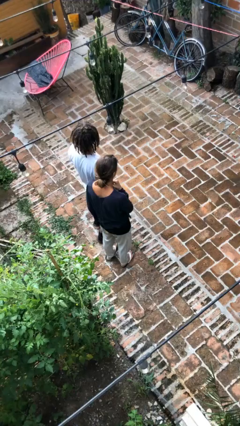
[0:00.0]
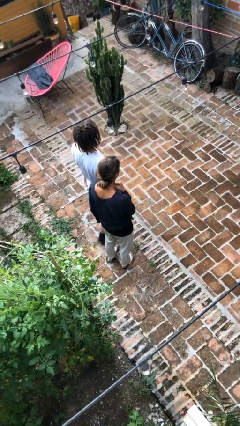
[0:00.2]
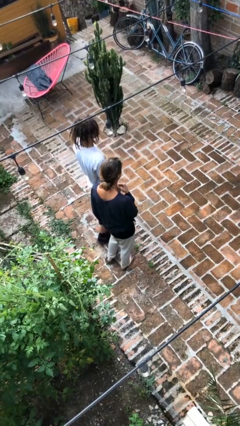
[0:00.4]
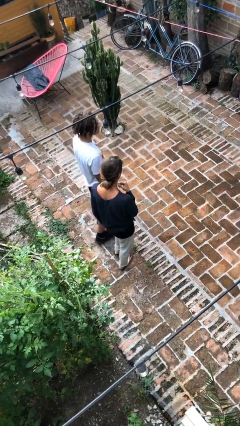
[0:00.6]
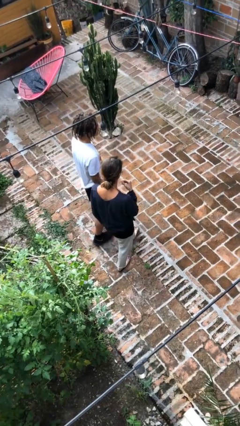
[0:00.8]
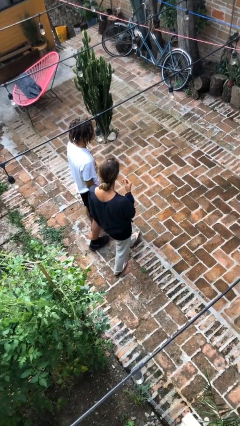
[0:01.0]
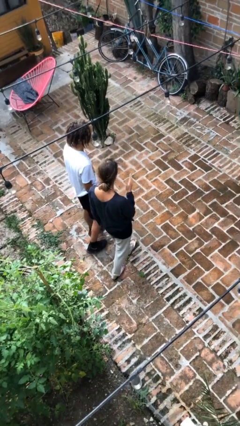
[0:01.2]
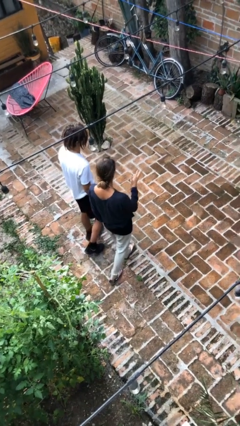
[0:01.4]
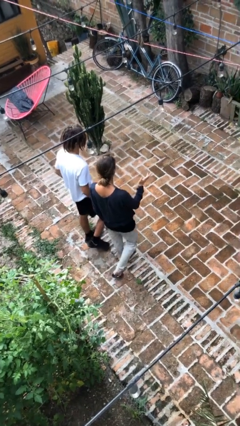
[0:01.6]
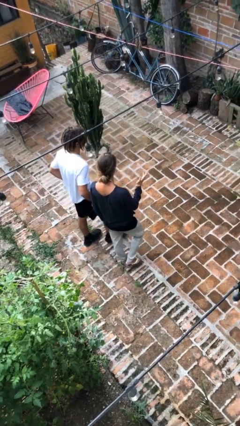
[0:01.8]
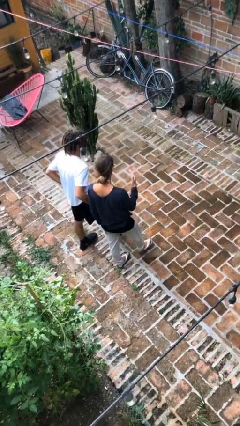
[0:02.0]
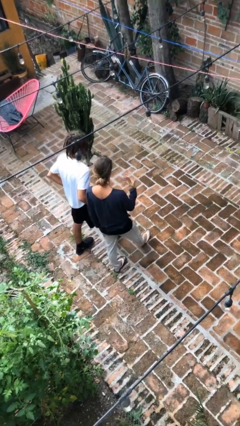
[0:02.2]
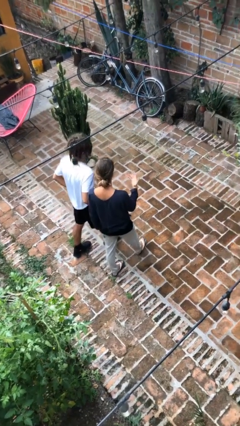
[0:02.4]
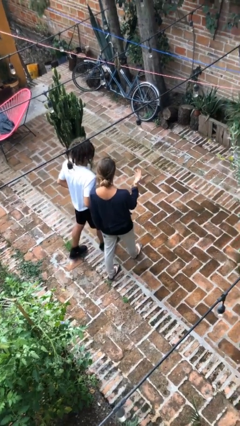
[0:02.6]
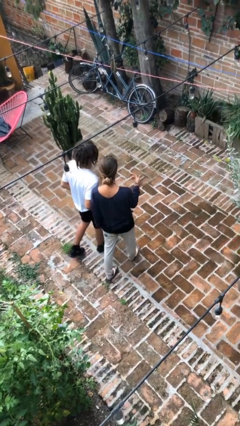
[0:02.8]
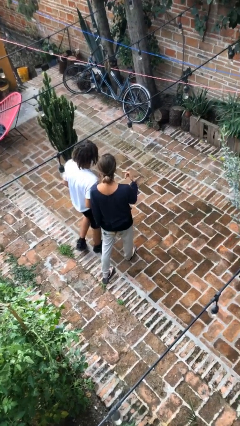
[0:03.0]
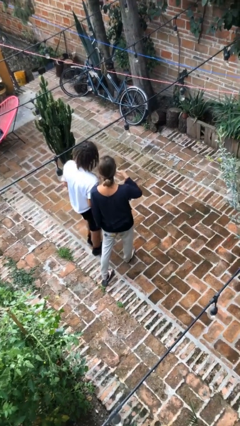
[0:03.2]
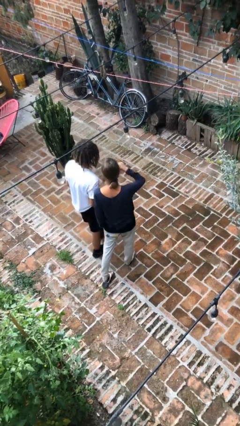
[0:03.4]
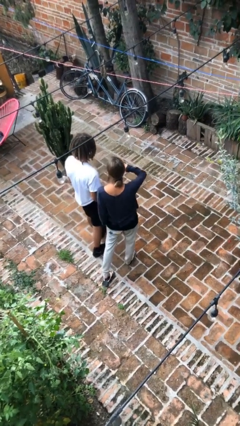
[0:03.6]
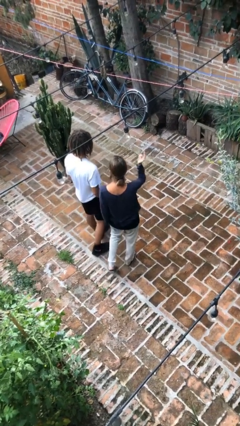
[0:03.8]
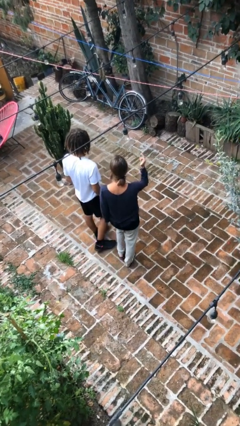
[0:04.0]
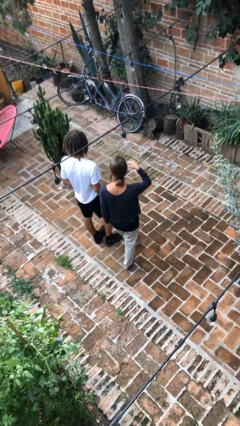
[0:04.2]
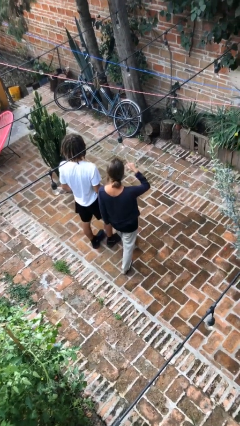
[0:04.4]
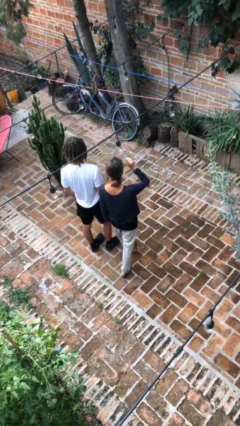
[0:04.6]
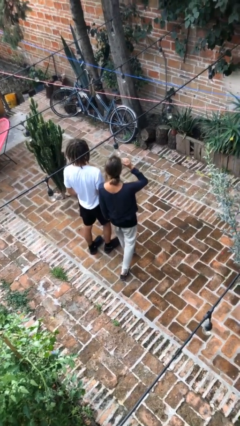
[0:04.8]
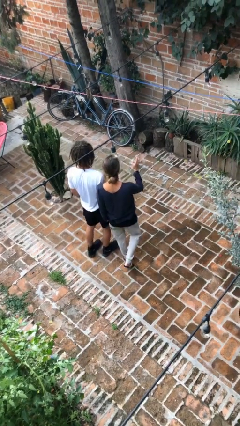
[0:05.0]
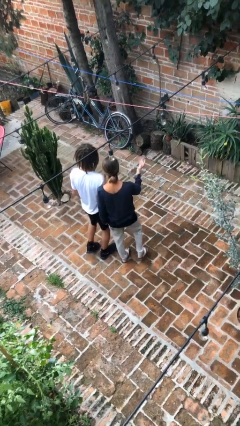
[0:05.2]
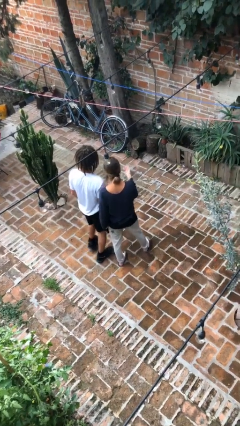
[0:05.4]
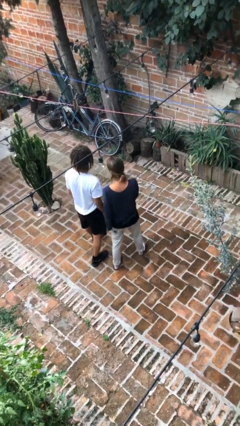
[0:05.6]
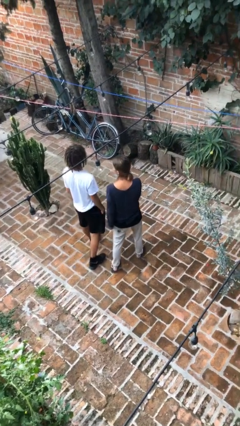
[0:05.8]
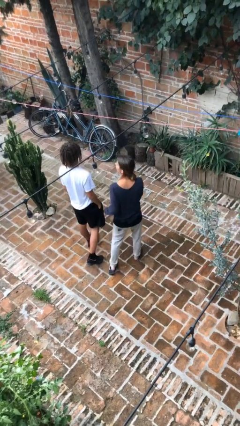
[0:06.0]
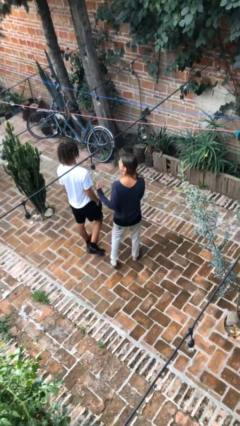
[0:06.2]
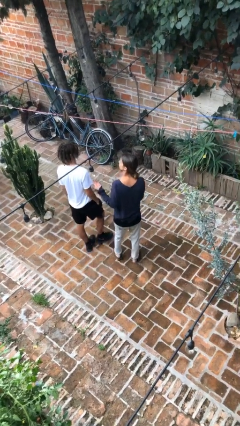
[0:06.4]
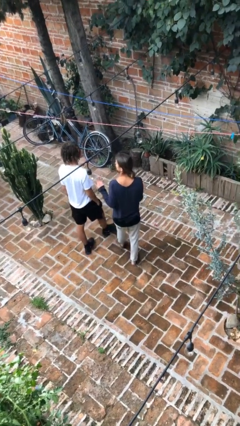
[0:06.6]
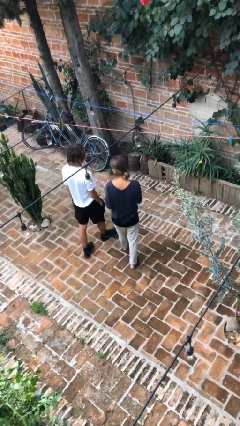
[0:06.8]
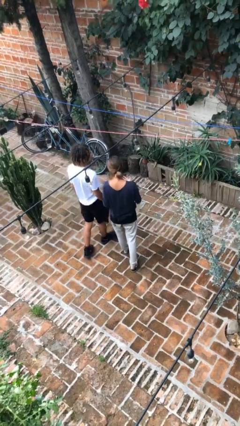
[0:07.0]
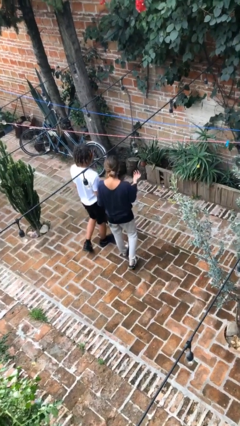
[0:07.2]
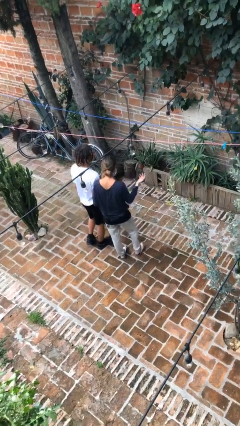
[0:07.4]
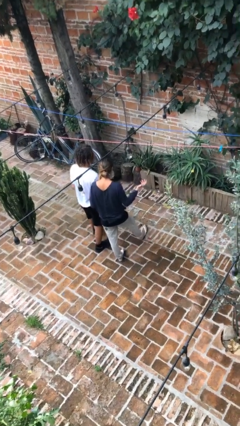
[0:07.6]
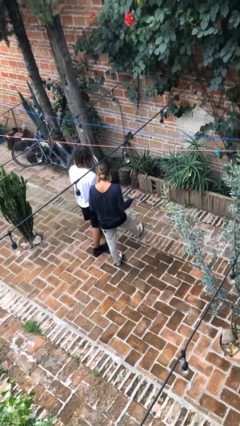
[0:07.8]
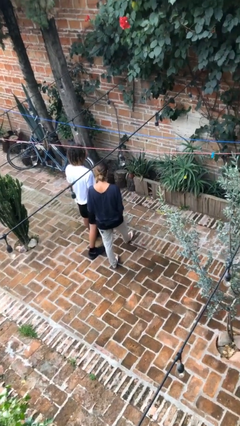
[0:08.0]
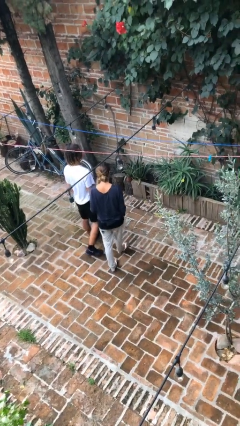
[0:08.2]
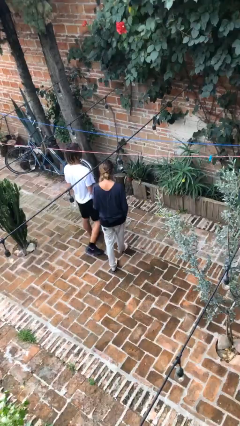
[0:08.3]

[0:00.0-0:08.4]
person talks to person

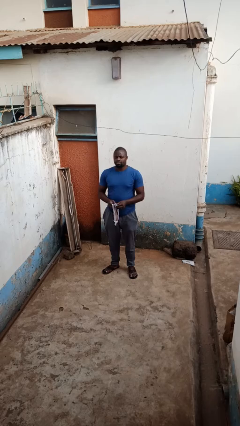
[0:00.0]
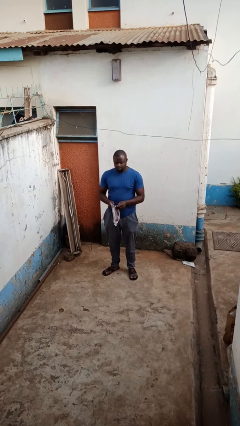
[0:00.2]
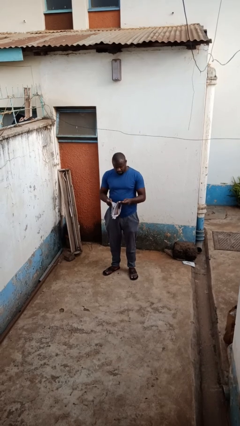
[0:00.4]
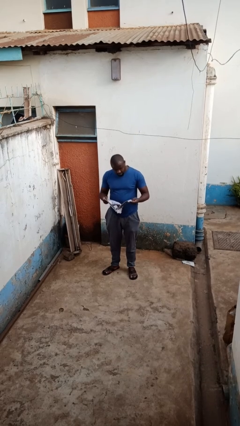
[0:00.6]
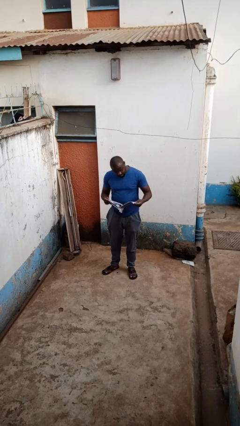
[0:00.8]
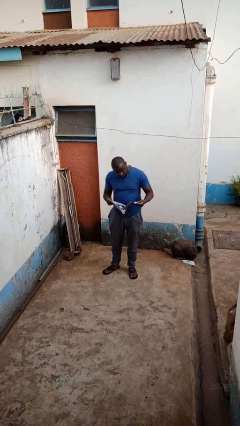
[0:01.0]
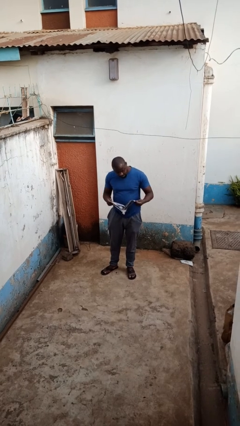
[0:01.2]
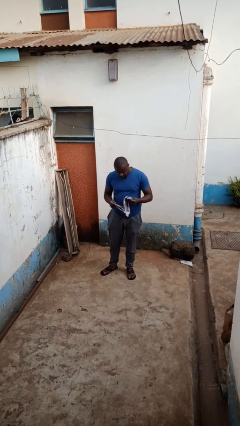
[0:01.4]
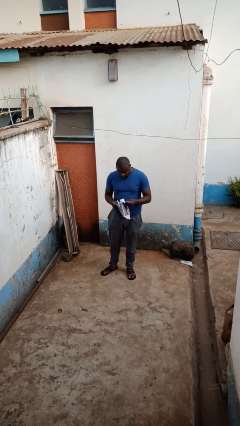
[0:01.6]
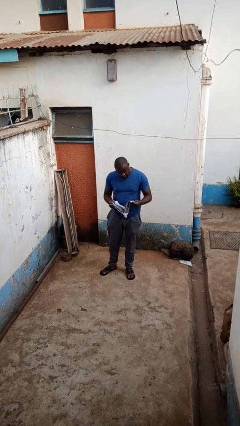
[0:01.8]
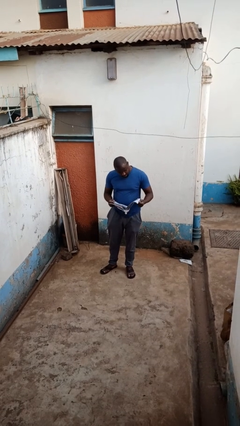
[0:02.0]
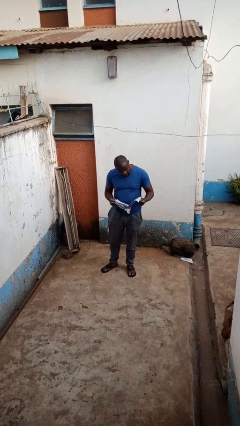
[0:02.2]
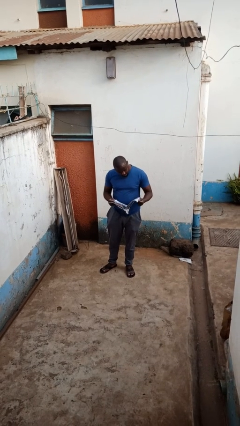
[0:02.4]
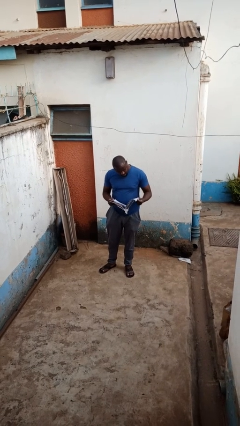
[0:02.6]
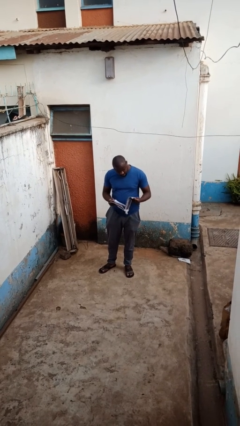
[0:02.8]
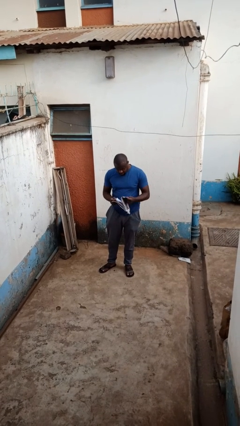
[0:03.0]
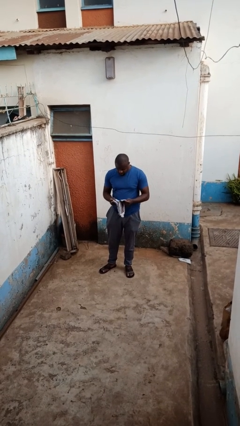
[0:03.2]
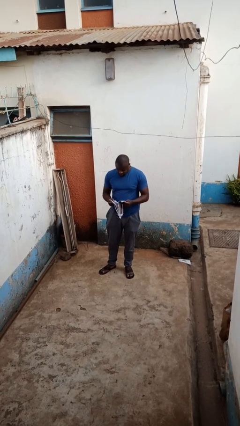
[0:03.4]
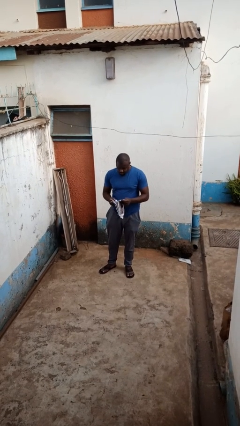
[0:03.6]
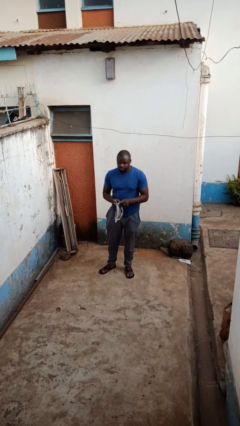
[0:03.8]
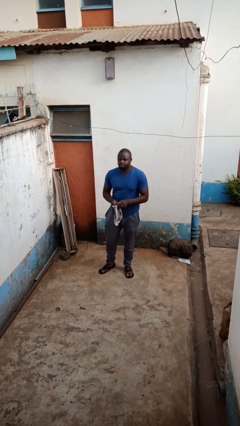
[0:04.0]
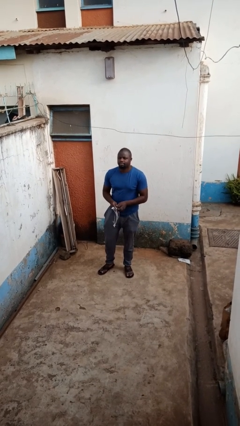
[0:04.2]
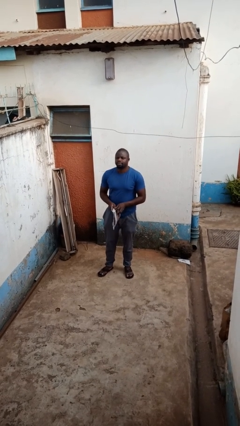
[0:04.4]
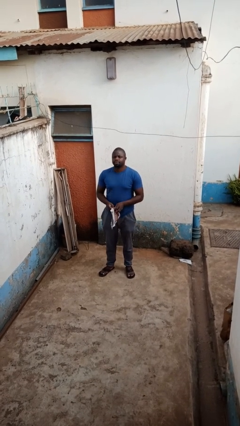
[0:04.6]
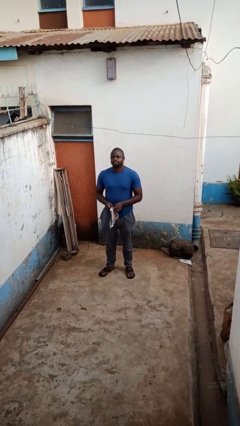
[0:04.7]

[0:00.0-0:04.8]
person reads magazine

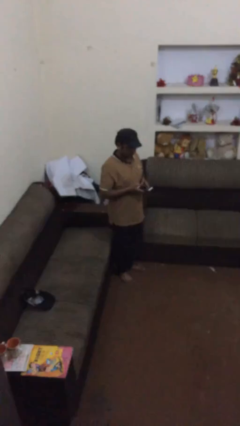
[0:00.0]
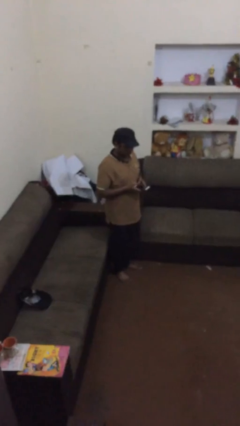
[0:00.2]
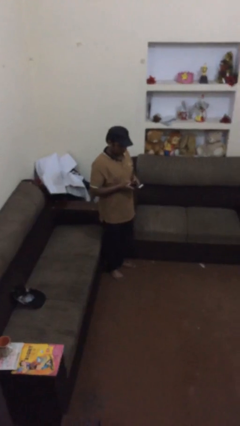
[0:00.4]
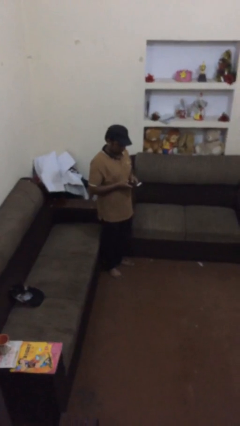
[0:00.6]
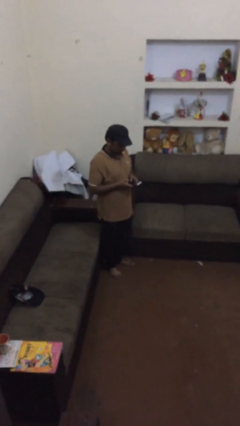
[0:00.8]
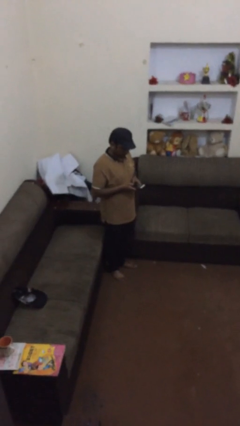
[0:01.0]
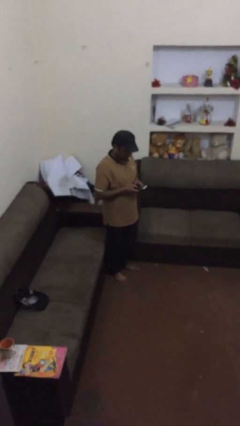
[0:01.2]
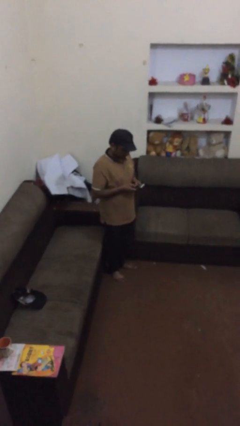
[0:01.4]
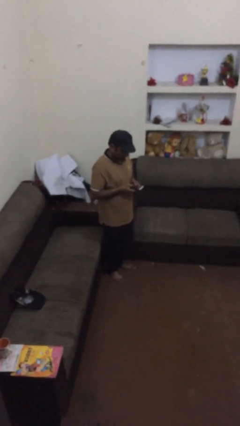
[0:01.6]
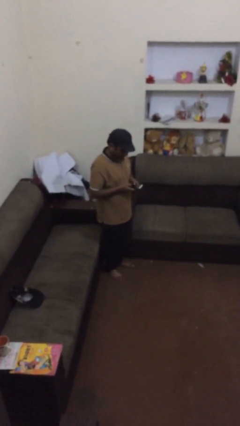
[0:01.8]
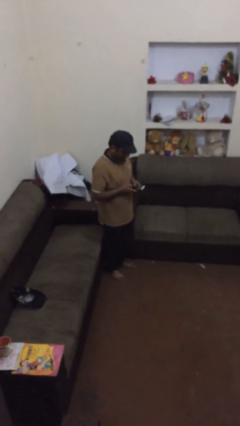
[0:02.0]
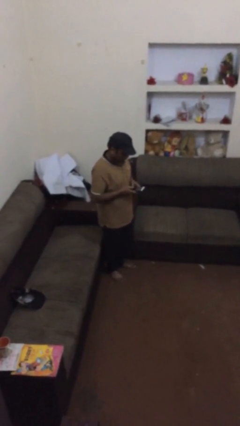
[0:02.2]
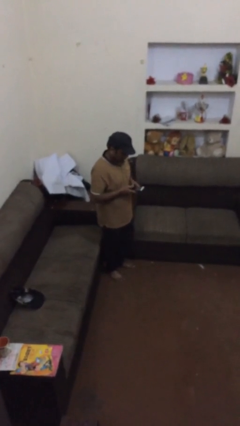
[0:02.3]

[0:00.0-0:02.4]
person texts on phone

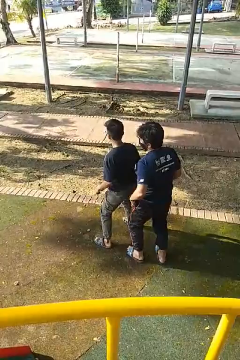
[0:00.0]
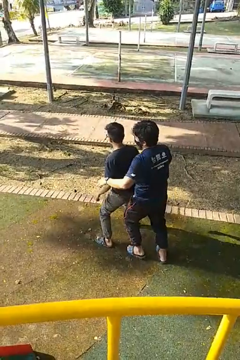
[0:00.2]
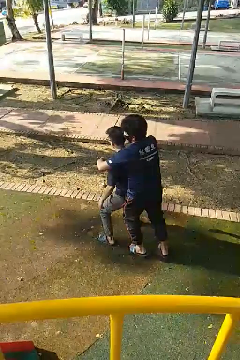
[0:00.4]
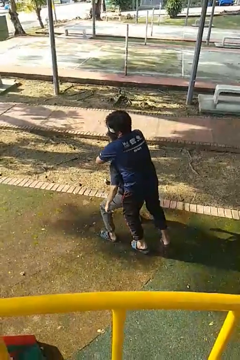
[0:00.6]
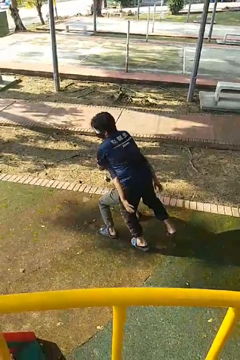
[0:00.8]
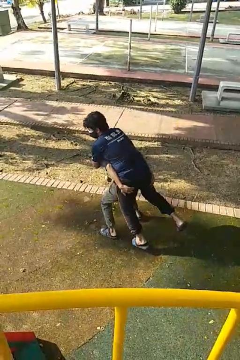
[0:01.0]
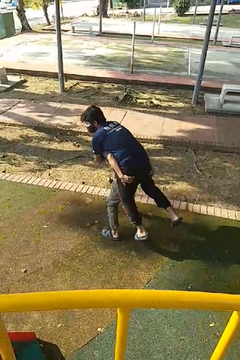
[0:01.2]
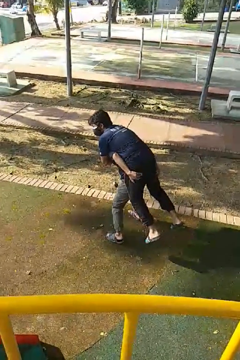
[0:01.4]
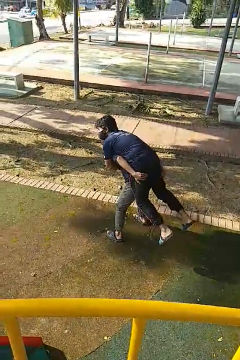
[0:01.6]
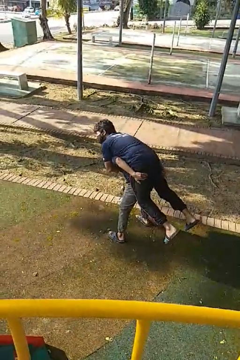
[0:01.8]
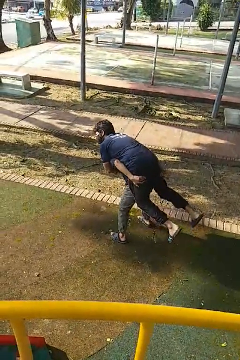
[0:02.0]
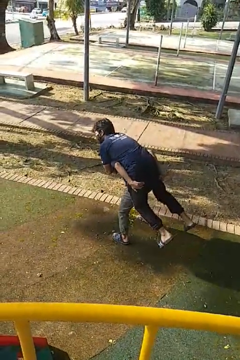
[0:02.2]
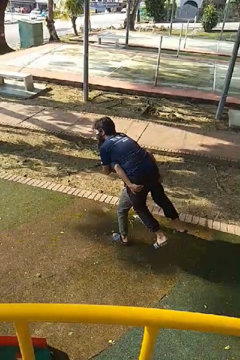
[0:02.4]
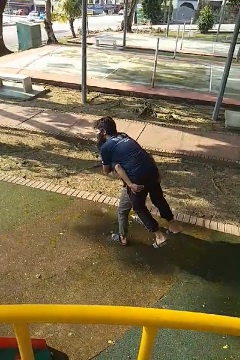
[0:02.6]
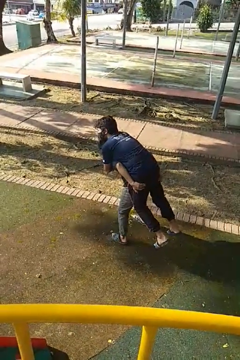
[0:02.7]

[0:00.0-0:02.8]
person carries person over shoulder
